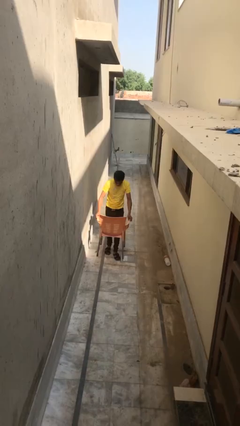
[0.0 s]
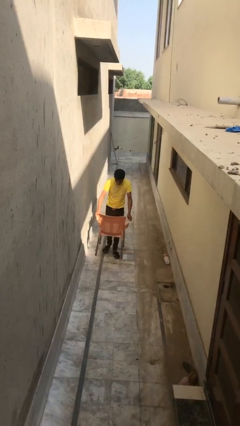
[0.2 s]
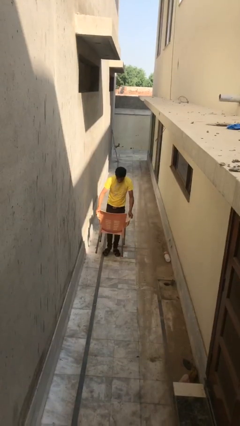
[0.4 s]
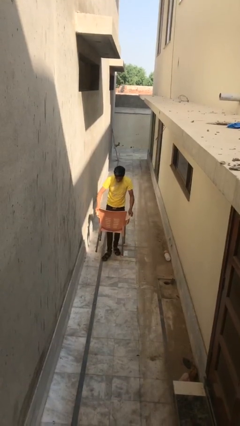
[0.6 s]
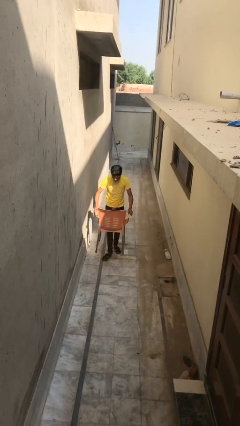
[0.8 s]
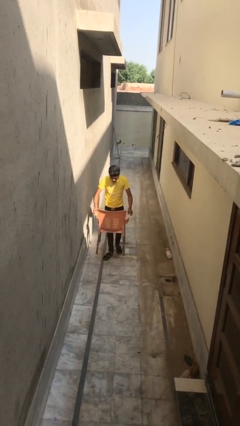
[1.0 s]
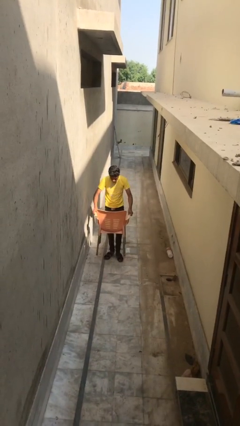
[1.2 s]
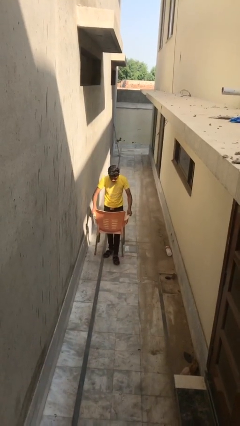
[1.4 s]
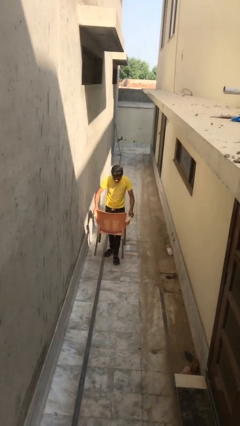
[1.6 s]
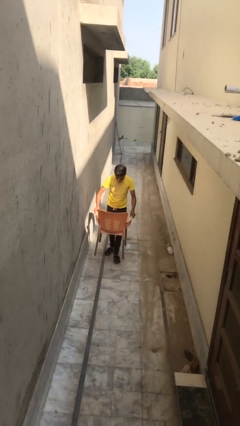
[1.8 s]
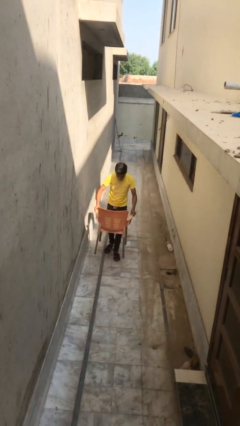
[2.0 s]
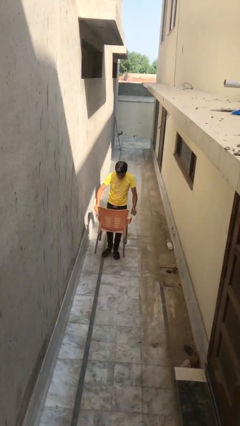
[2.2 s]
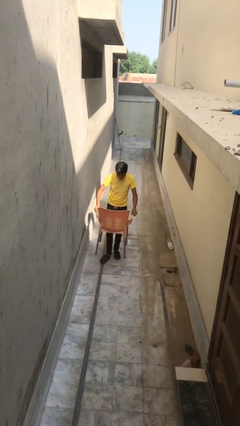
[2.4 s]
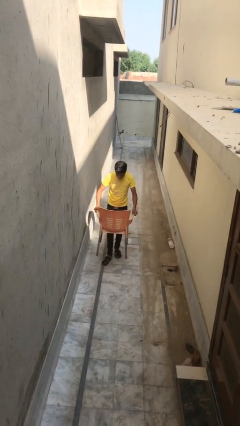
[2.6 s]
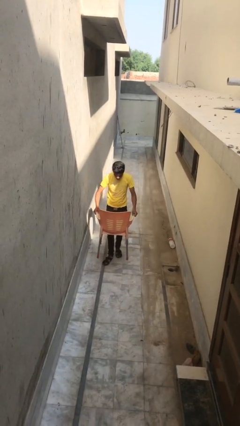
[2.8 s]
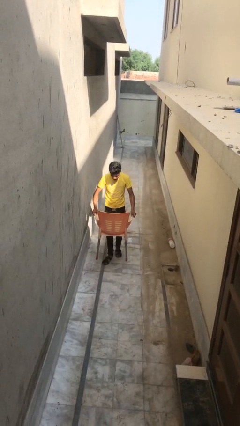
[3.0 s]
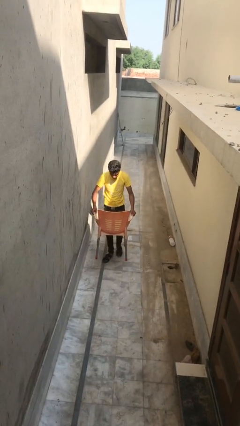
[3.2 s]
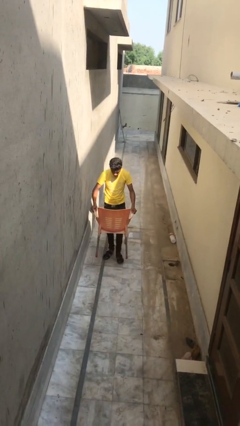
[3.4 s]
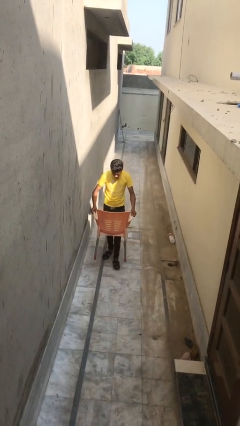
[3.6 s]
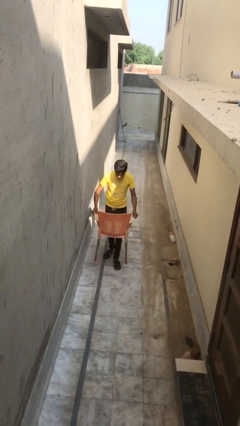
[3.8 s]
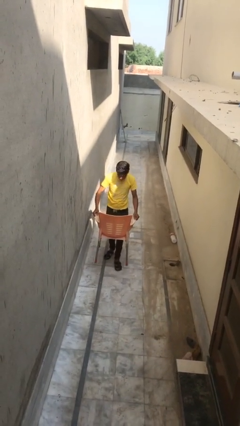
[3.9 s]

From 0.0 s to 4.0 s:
person carries heavy object

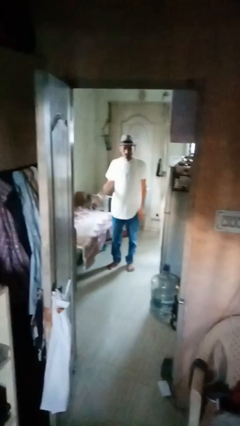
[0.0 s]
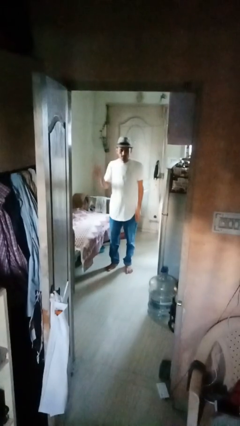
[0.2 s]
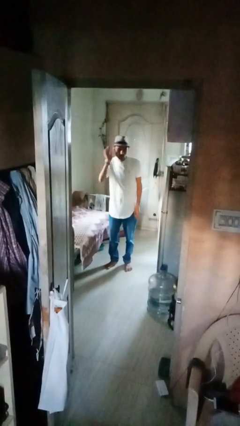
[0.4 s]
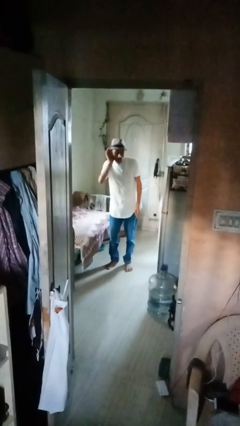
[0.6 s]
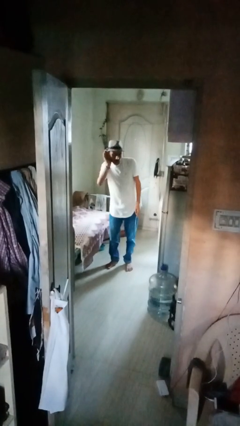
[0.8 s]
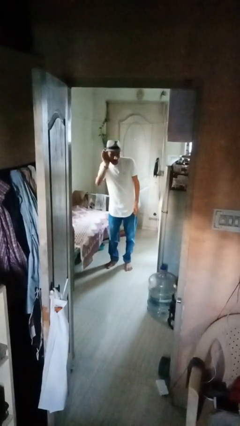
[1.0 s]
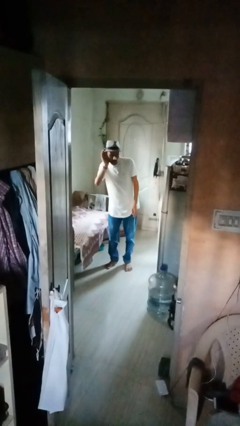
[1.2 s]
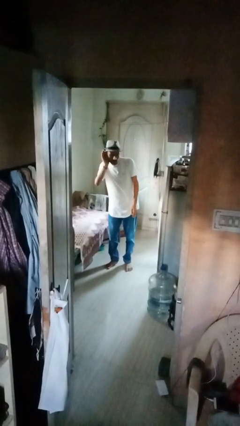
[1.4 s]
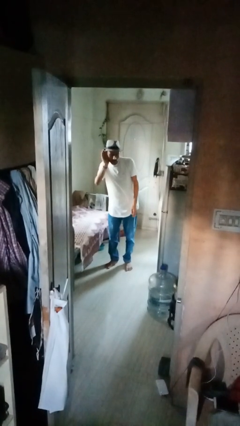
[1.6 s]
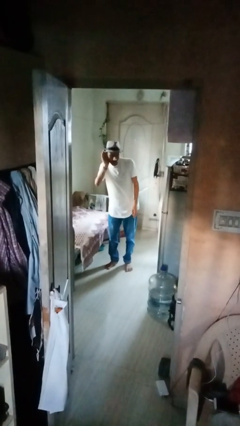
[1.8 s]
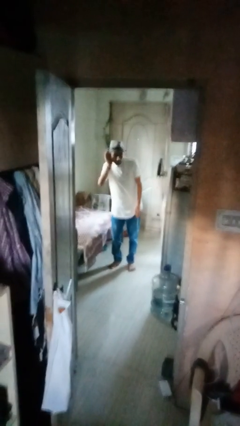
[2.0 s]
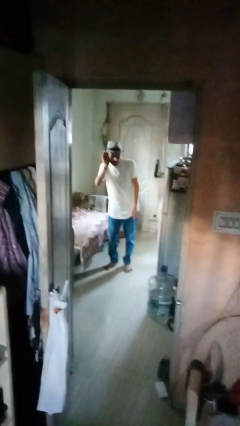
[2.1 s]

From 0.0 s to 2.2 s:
person gestures listen closely

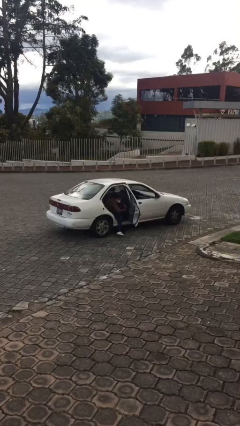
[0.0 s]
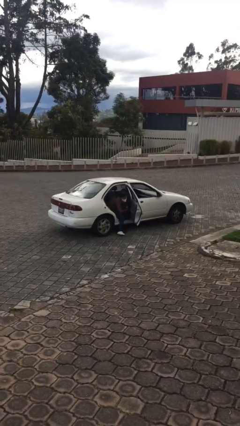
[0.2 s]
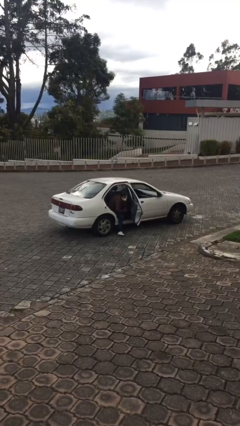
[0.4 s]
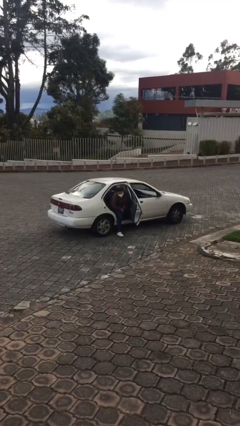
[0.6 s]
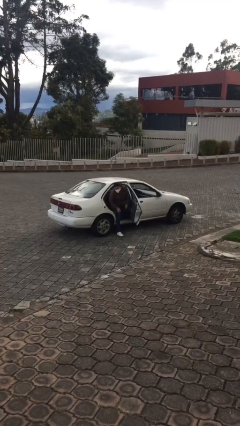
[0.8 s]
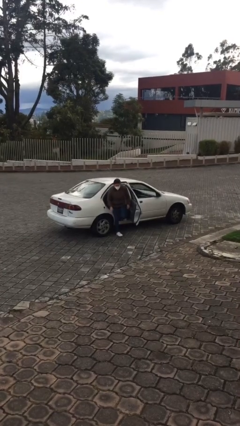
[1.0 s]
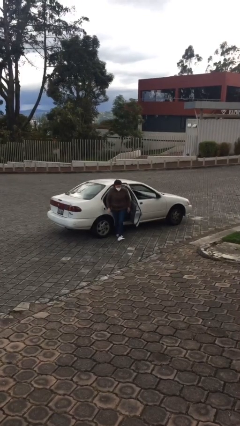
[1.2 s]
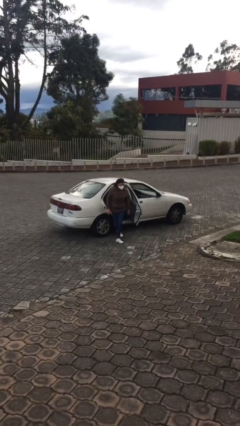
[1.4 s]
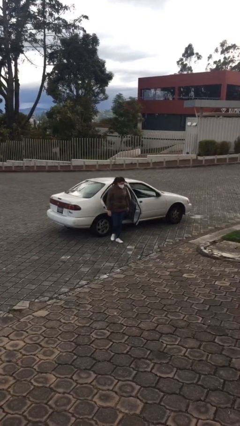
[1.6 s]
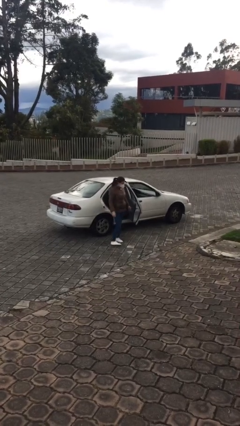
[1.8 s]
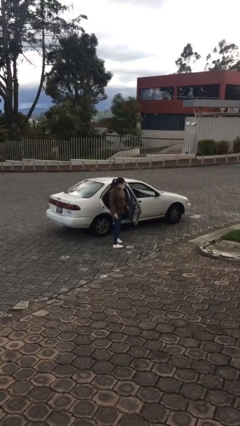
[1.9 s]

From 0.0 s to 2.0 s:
person exits car

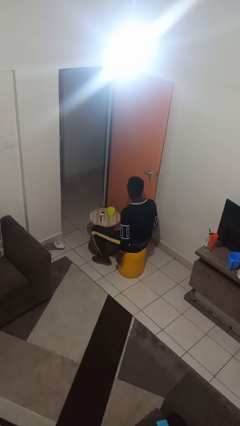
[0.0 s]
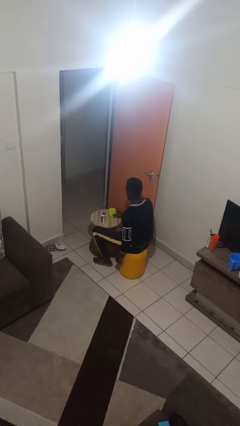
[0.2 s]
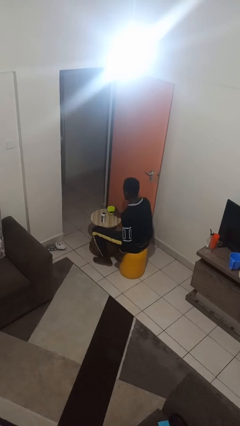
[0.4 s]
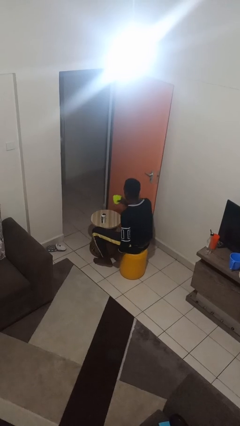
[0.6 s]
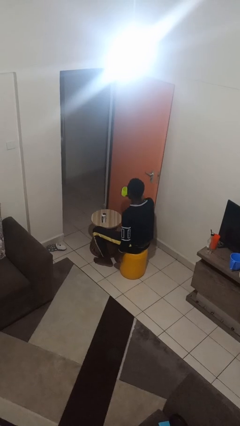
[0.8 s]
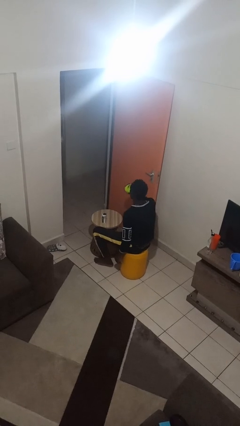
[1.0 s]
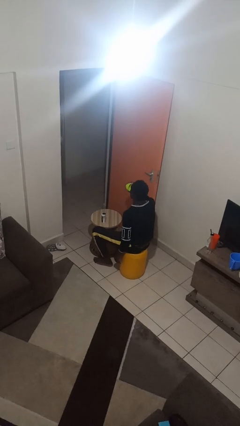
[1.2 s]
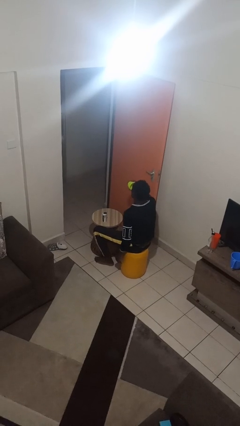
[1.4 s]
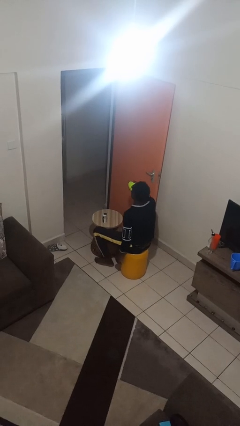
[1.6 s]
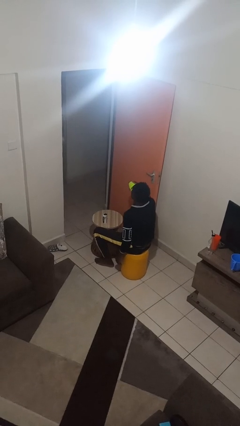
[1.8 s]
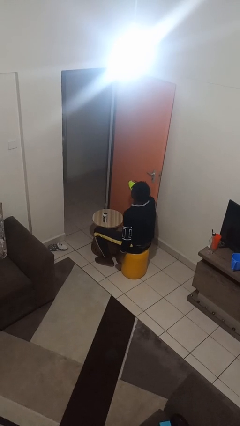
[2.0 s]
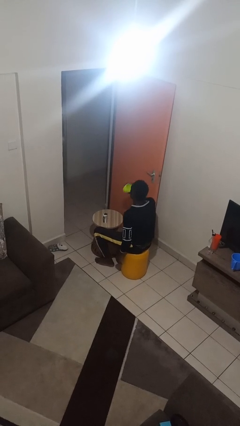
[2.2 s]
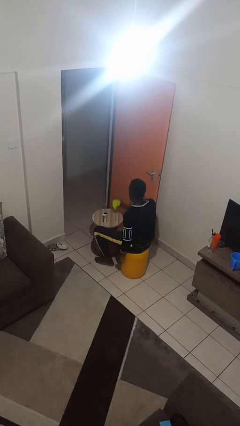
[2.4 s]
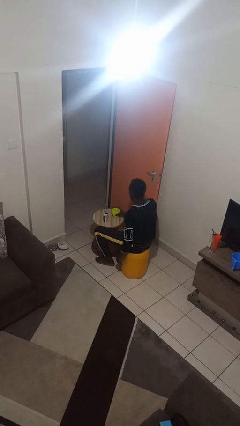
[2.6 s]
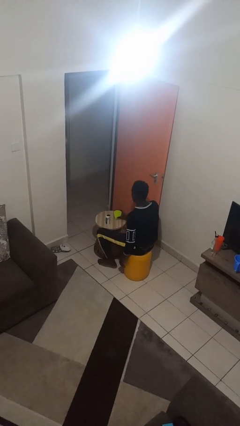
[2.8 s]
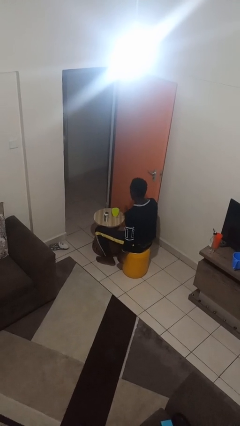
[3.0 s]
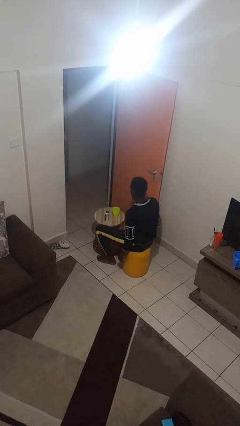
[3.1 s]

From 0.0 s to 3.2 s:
person drinks from cup

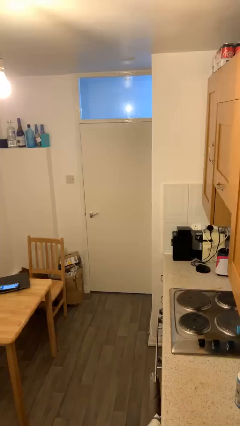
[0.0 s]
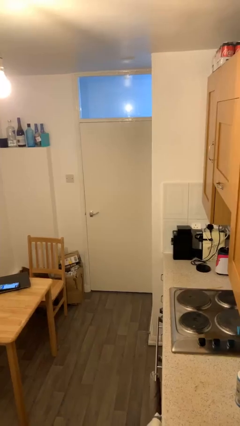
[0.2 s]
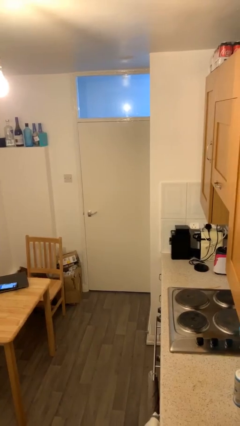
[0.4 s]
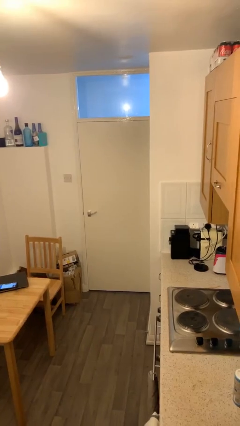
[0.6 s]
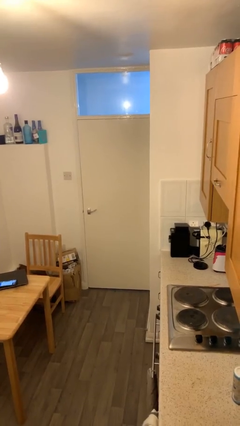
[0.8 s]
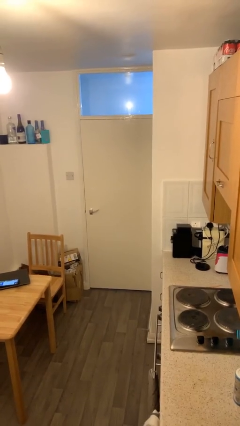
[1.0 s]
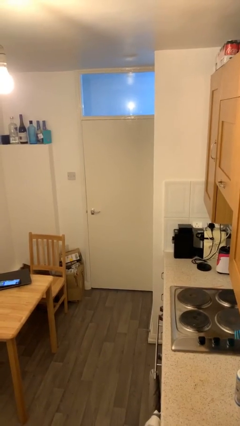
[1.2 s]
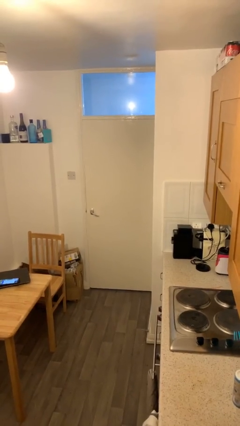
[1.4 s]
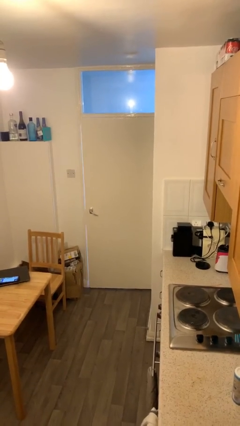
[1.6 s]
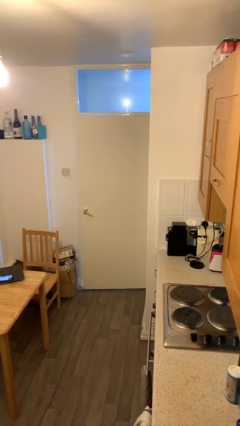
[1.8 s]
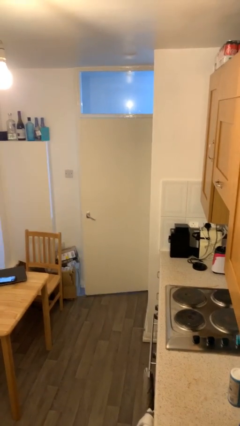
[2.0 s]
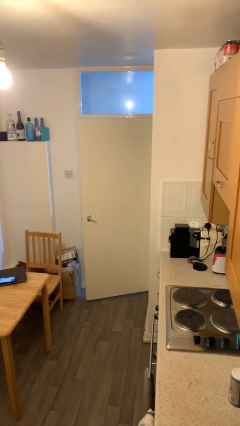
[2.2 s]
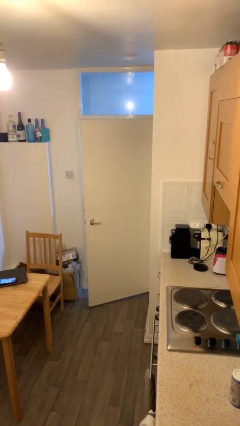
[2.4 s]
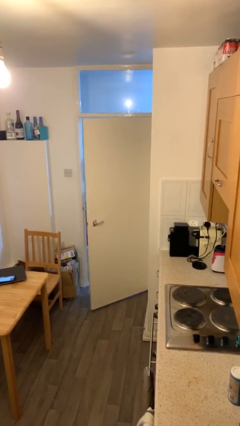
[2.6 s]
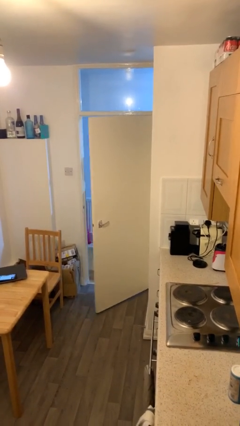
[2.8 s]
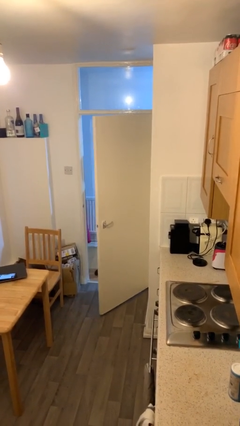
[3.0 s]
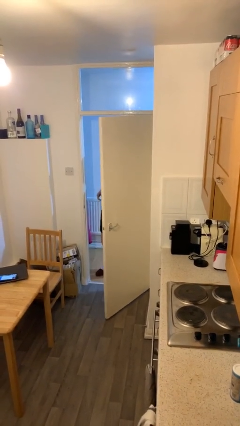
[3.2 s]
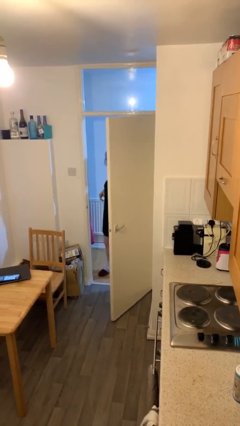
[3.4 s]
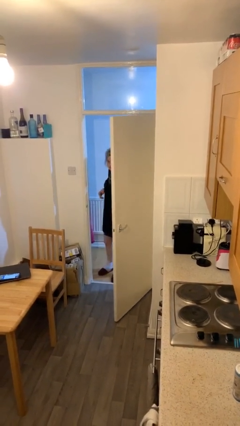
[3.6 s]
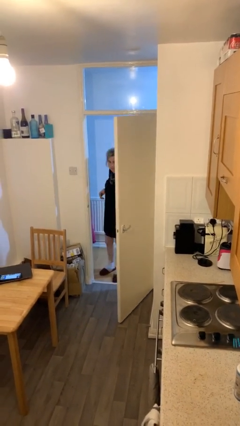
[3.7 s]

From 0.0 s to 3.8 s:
person opens facility door

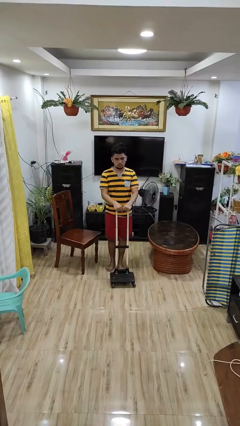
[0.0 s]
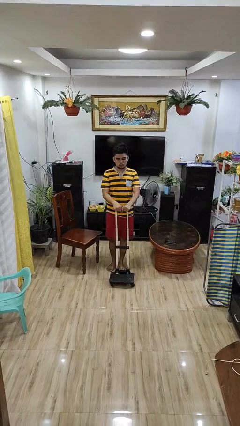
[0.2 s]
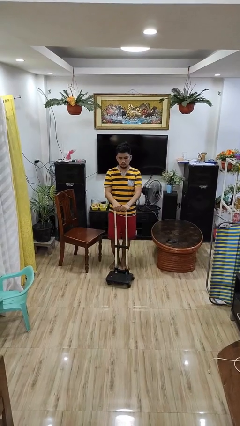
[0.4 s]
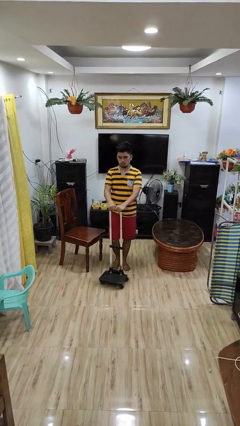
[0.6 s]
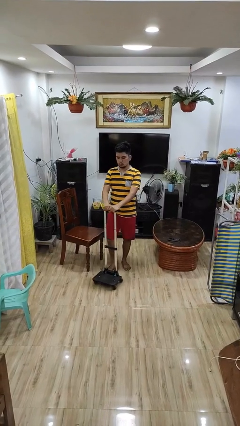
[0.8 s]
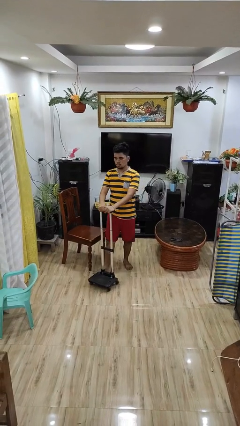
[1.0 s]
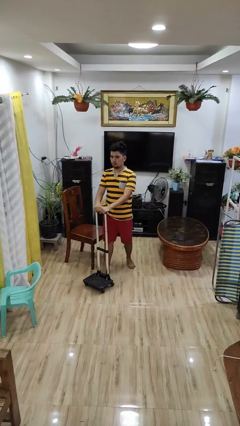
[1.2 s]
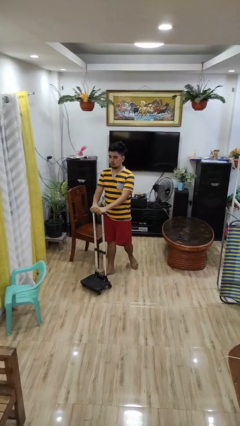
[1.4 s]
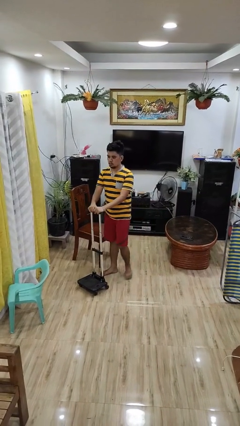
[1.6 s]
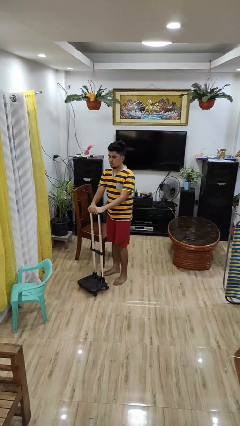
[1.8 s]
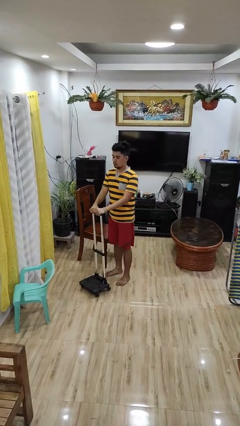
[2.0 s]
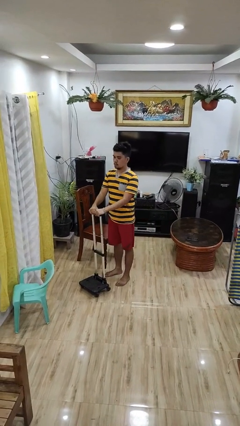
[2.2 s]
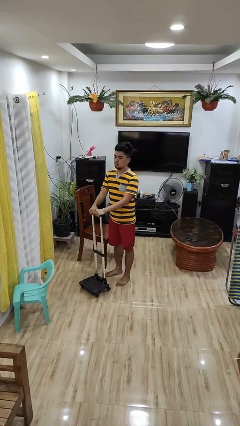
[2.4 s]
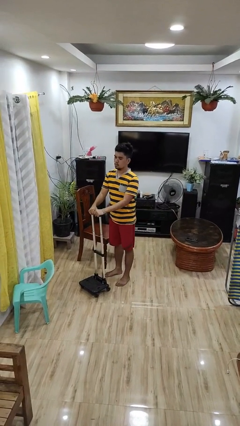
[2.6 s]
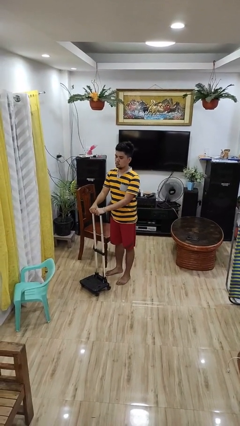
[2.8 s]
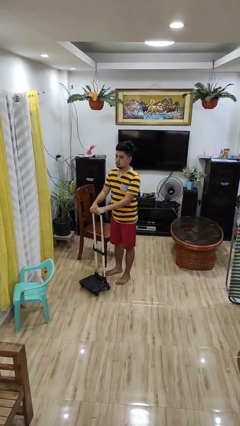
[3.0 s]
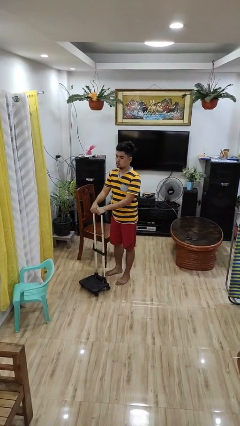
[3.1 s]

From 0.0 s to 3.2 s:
person pushes wheeled cart
